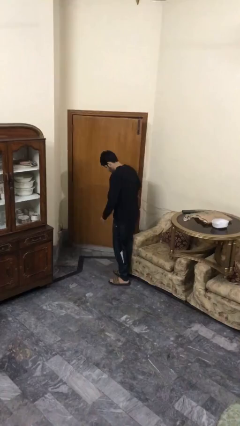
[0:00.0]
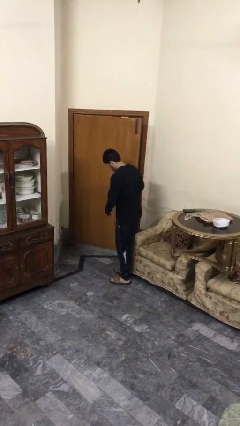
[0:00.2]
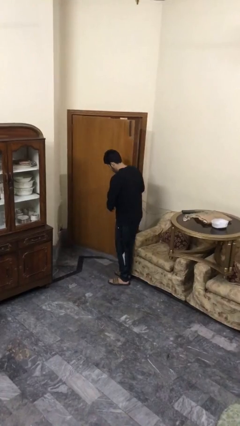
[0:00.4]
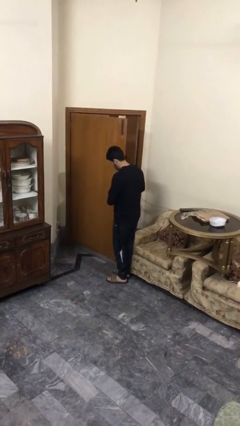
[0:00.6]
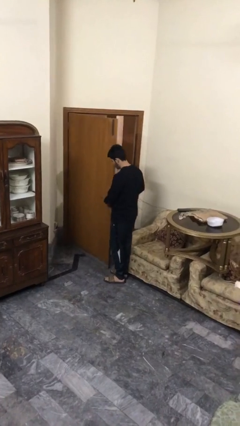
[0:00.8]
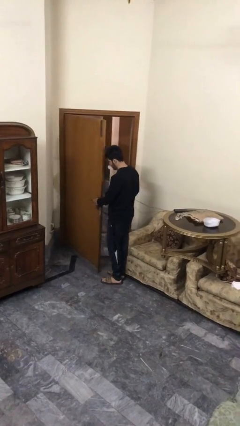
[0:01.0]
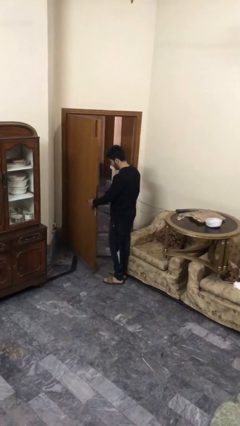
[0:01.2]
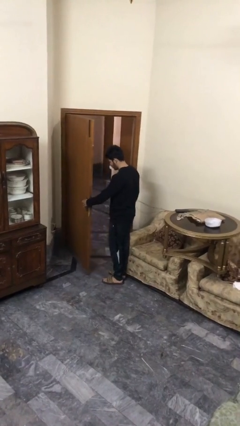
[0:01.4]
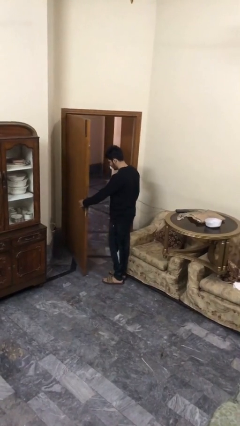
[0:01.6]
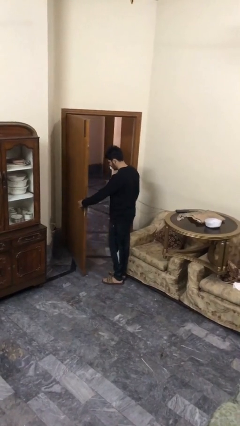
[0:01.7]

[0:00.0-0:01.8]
person opens facility door

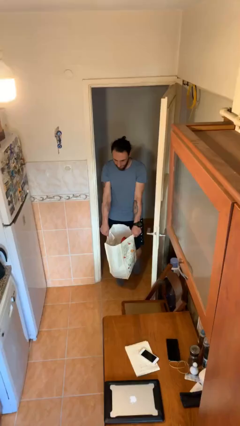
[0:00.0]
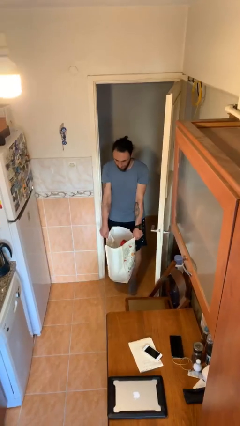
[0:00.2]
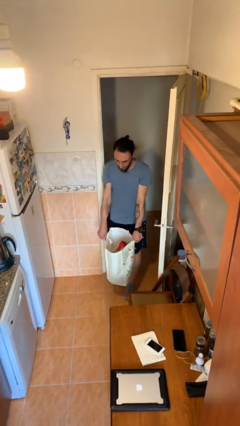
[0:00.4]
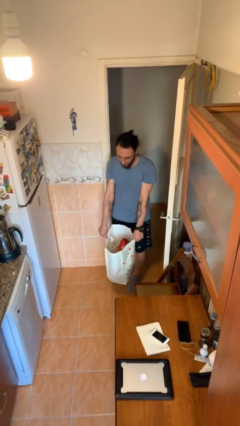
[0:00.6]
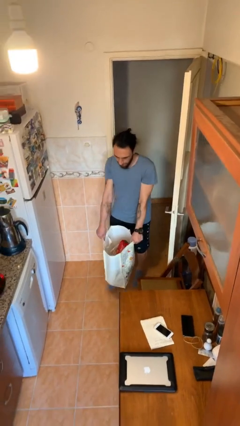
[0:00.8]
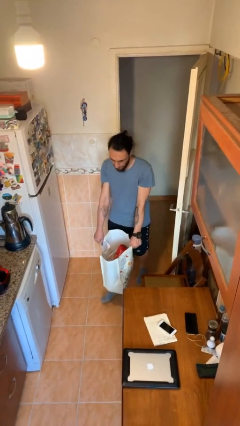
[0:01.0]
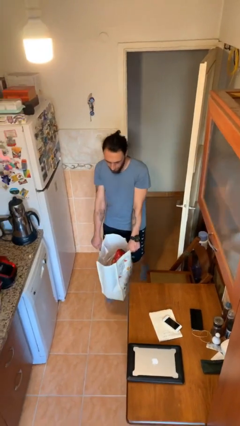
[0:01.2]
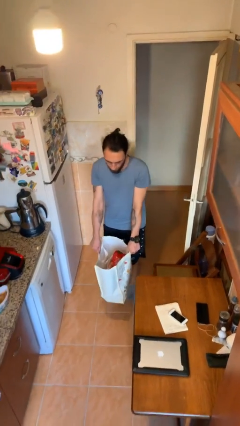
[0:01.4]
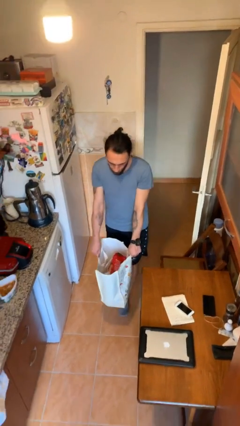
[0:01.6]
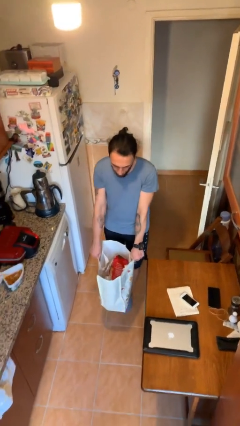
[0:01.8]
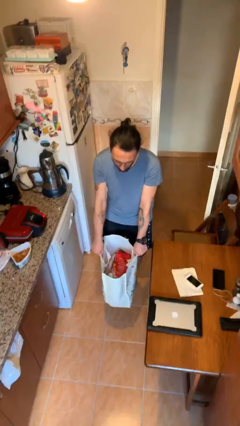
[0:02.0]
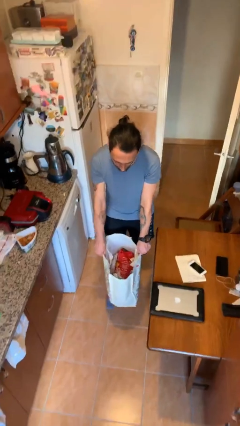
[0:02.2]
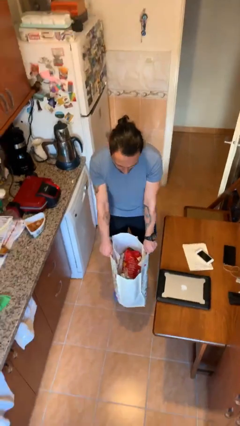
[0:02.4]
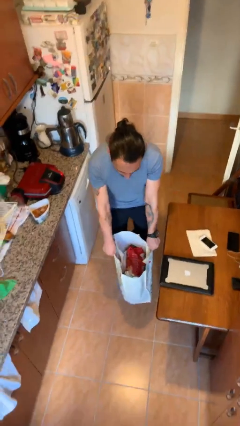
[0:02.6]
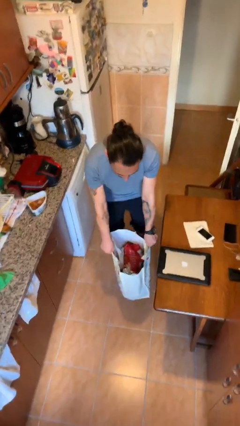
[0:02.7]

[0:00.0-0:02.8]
person carries heavy object

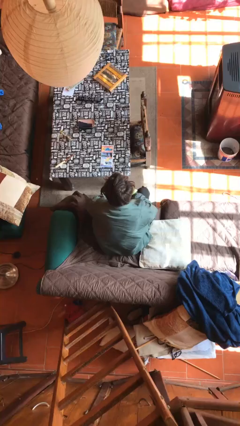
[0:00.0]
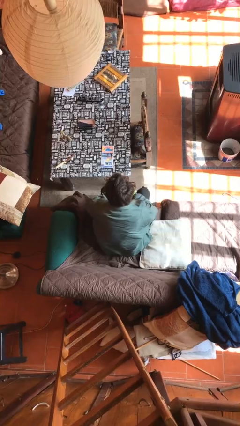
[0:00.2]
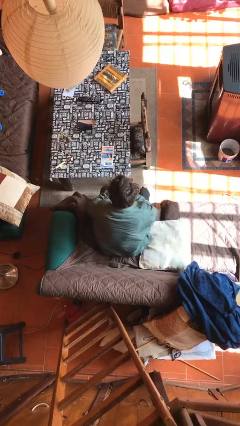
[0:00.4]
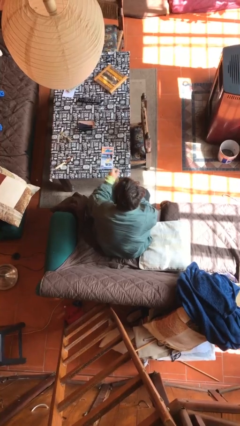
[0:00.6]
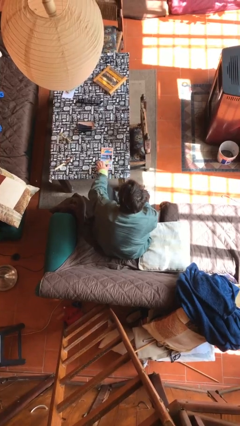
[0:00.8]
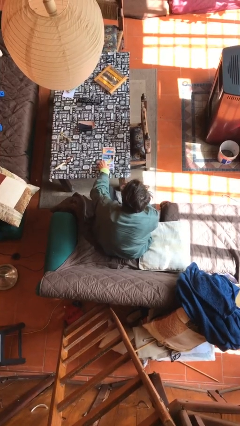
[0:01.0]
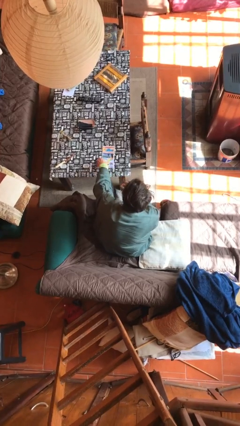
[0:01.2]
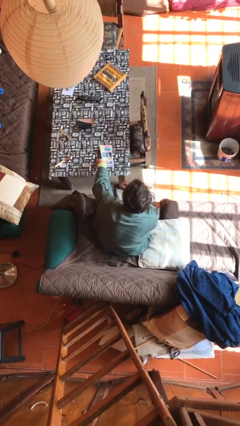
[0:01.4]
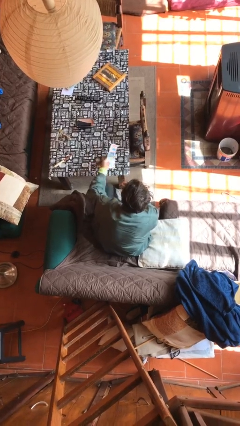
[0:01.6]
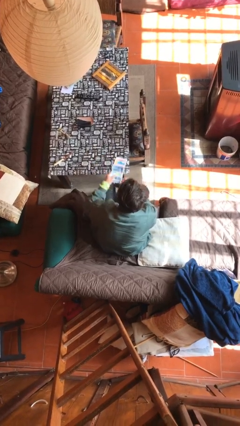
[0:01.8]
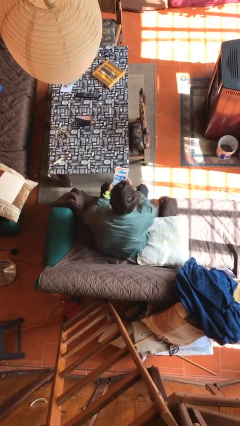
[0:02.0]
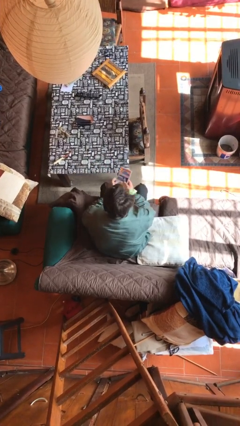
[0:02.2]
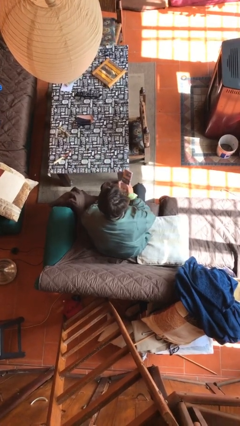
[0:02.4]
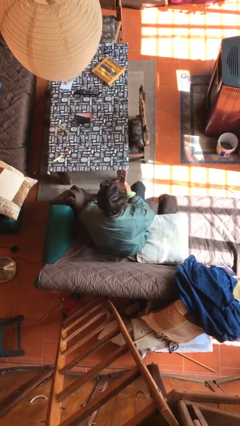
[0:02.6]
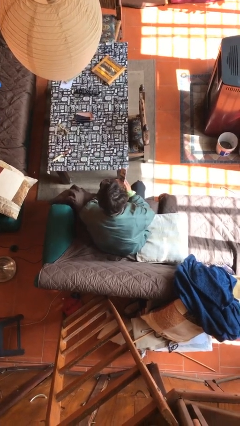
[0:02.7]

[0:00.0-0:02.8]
person picks up object from table

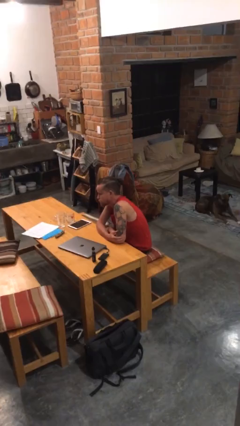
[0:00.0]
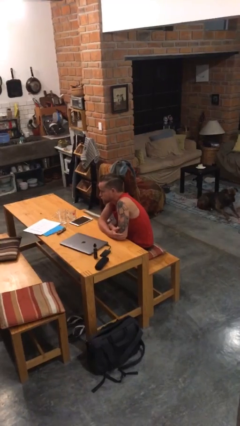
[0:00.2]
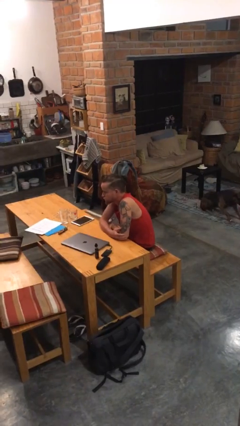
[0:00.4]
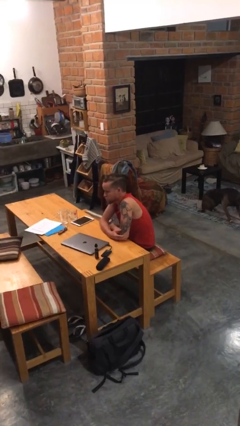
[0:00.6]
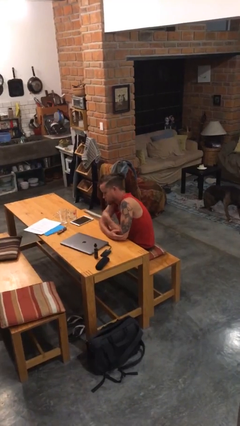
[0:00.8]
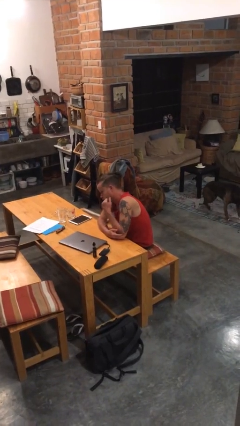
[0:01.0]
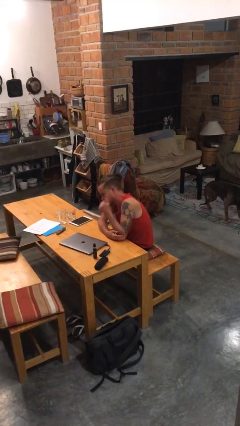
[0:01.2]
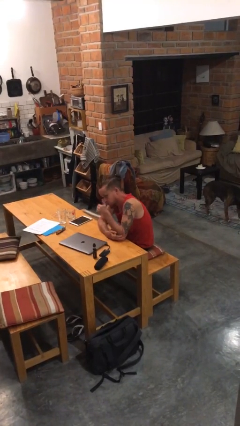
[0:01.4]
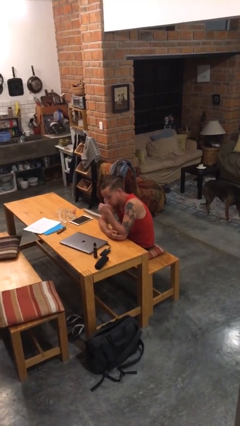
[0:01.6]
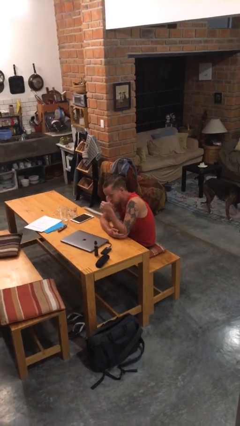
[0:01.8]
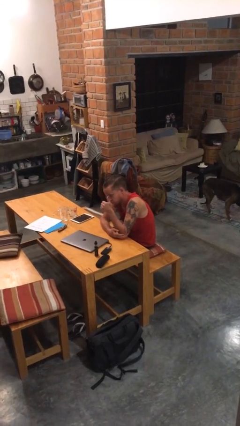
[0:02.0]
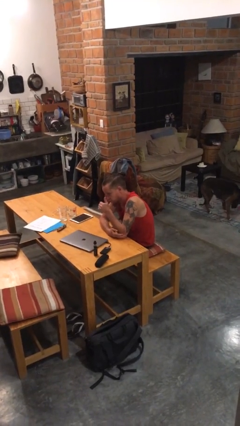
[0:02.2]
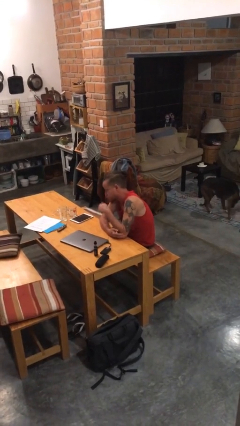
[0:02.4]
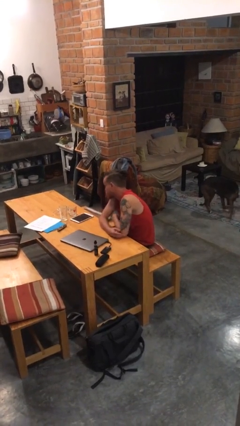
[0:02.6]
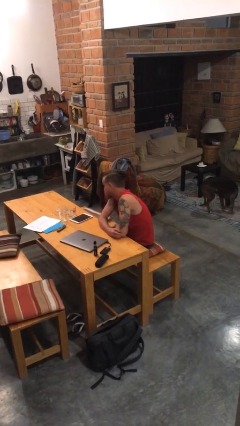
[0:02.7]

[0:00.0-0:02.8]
person gestures thumbs up

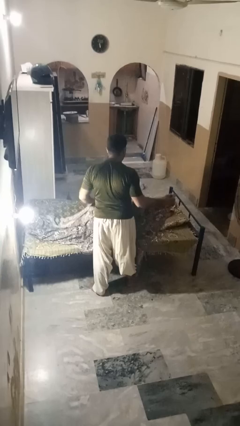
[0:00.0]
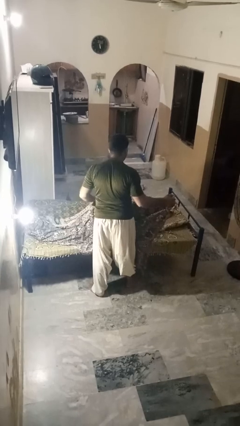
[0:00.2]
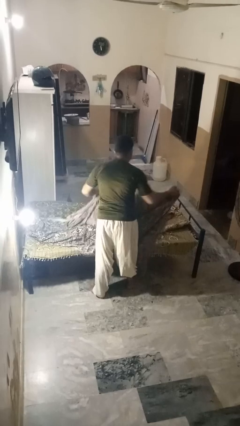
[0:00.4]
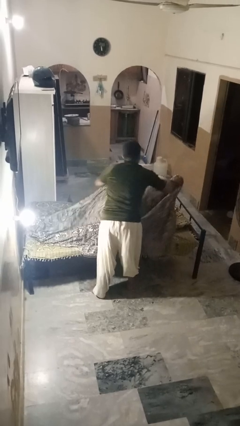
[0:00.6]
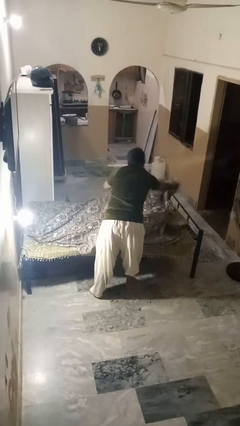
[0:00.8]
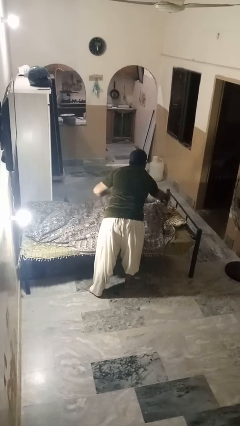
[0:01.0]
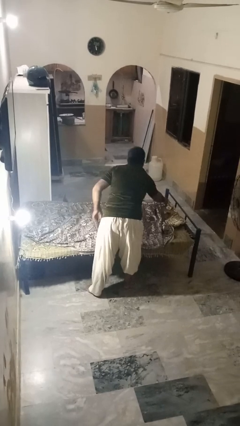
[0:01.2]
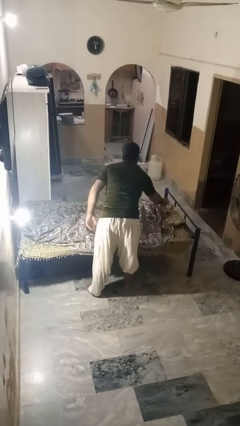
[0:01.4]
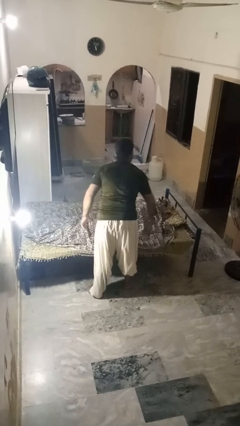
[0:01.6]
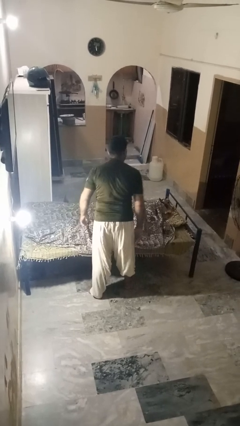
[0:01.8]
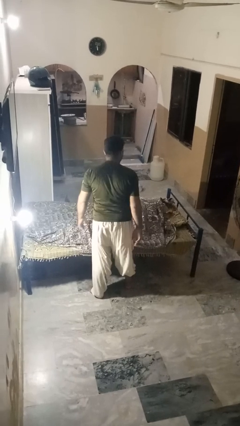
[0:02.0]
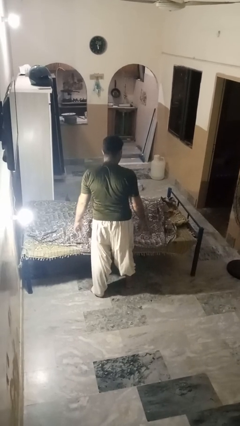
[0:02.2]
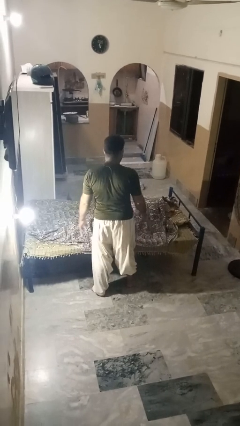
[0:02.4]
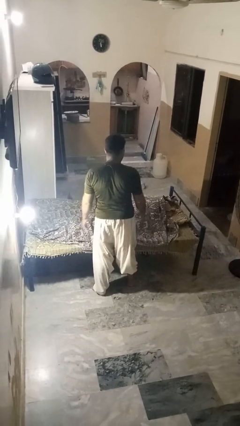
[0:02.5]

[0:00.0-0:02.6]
person covers friend with blanket

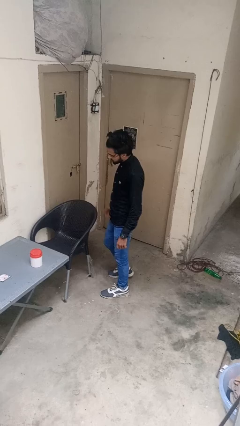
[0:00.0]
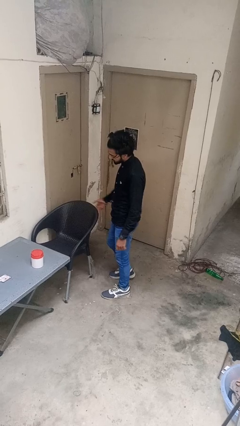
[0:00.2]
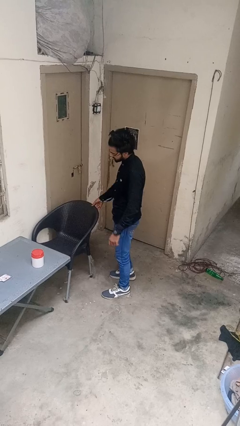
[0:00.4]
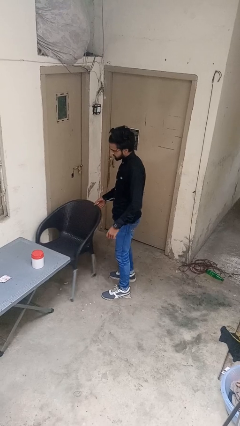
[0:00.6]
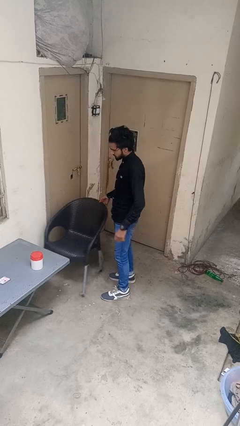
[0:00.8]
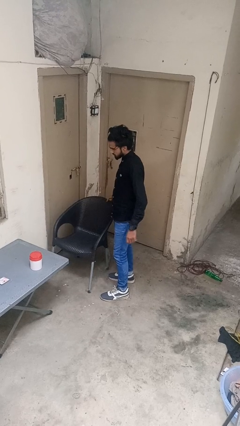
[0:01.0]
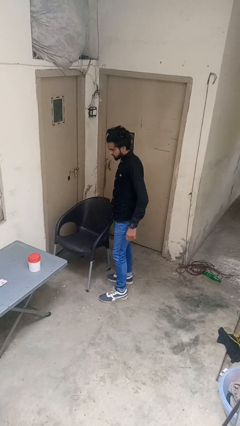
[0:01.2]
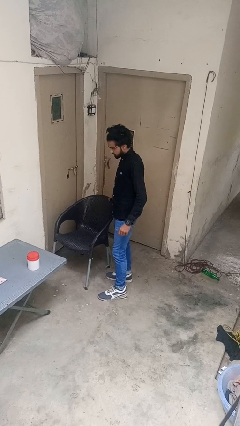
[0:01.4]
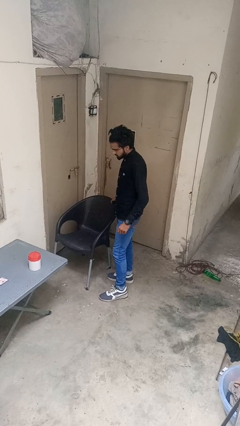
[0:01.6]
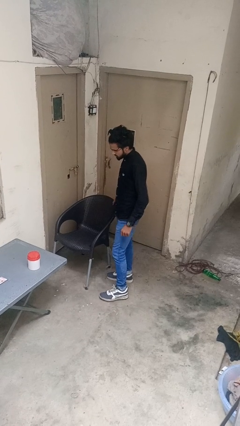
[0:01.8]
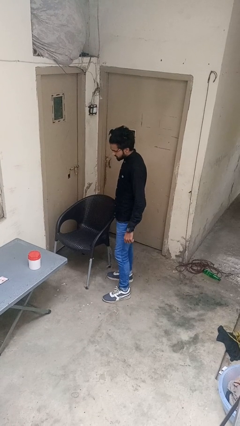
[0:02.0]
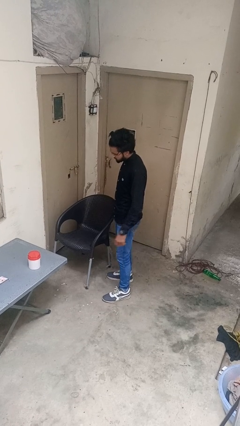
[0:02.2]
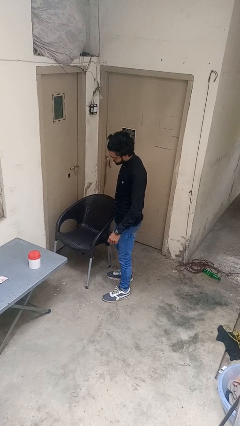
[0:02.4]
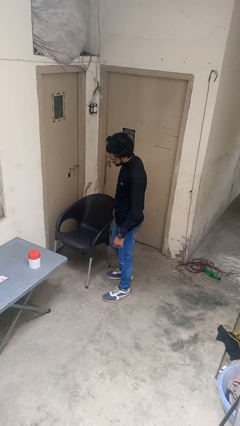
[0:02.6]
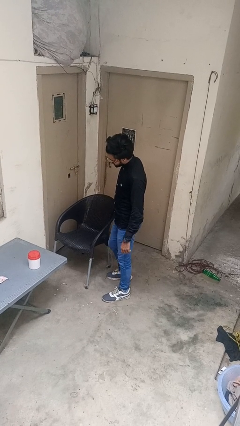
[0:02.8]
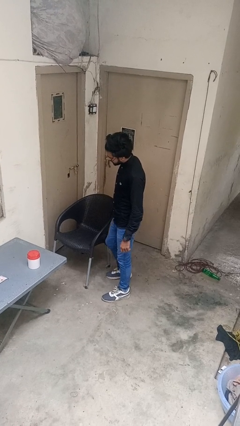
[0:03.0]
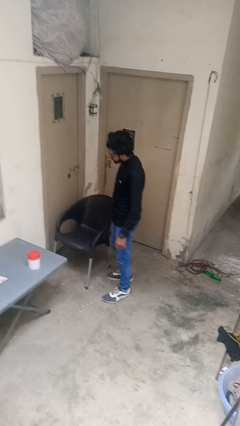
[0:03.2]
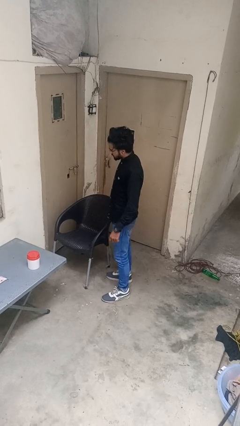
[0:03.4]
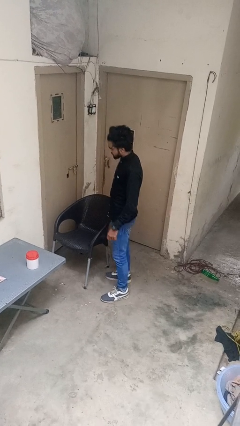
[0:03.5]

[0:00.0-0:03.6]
person pulls out chair

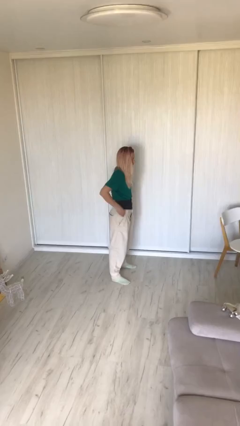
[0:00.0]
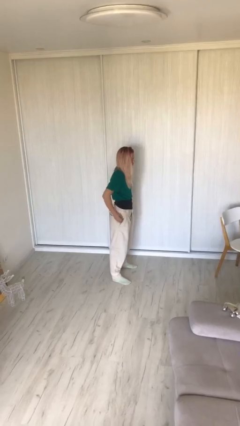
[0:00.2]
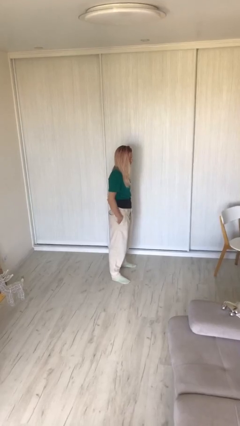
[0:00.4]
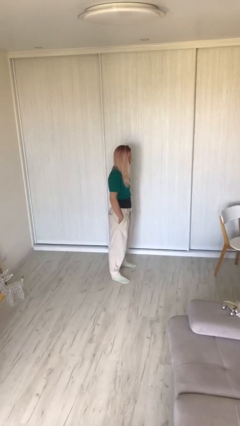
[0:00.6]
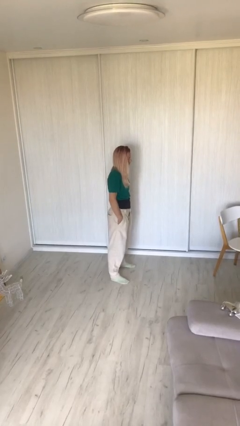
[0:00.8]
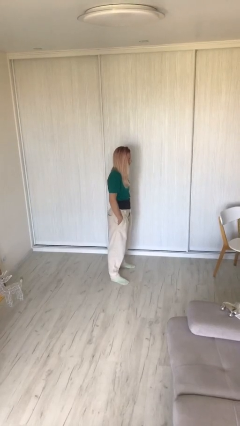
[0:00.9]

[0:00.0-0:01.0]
person puts hands in back pockets
